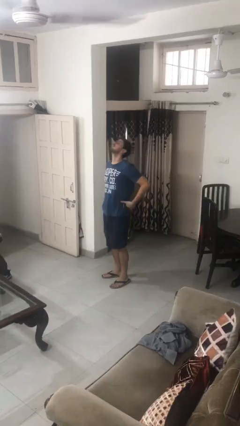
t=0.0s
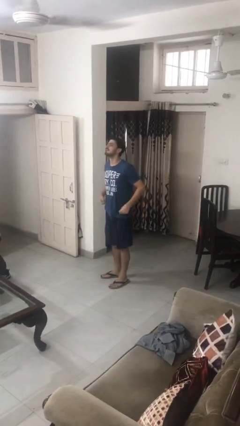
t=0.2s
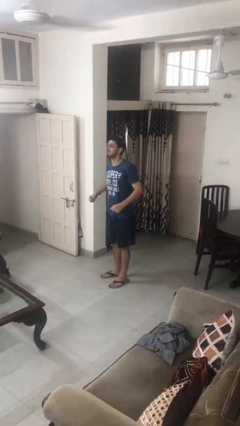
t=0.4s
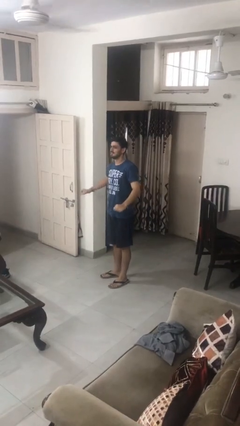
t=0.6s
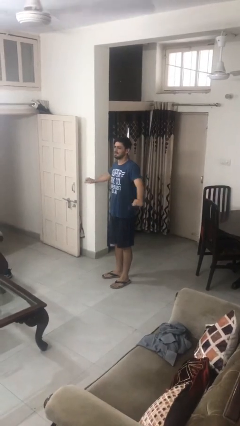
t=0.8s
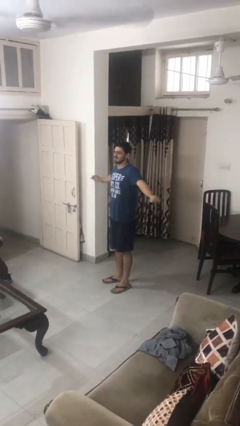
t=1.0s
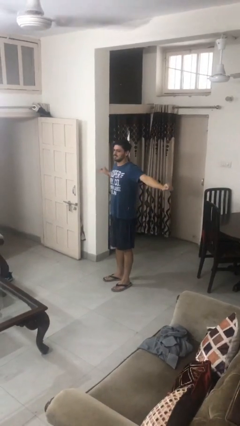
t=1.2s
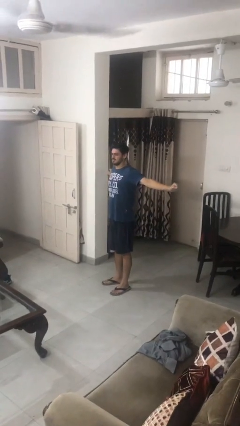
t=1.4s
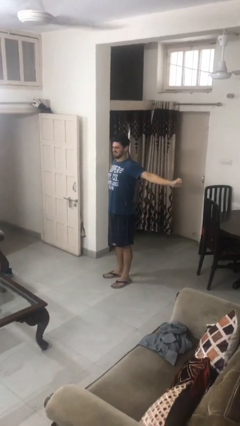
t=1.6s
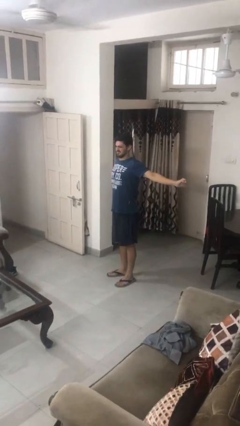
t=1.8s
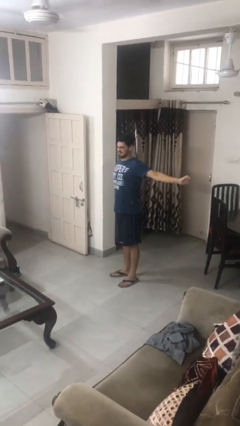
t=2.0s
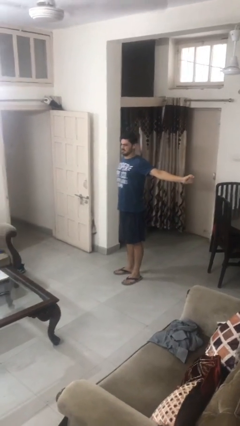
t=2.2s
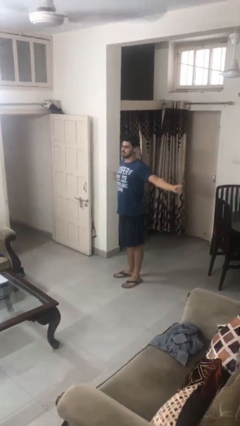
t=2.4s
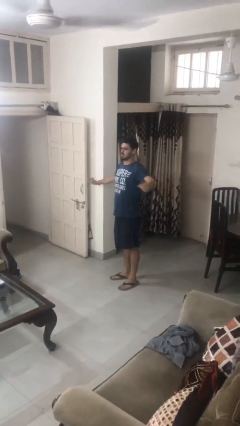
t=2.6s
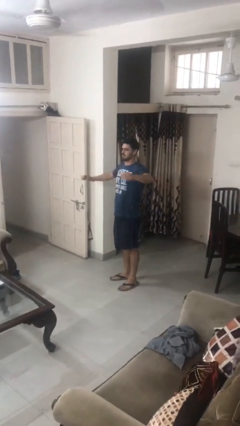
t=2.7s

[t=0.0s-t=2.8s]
person stretches arms to side

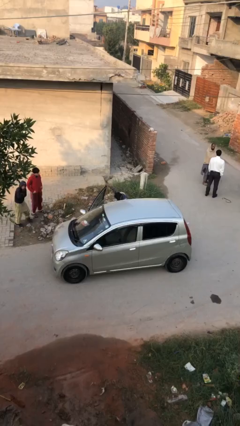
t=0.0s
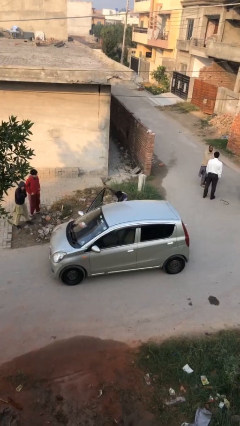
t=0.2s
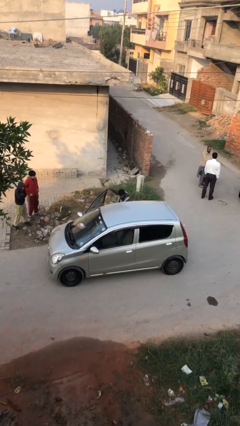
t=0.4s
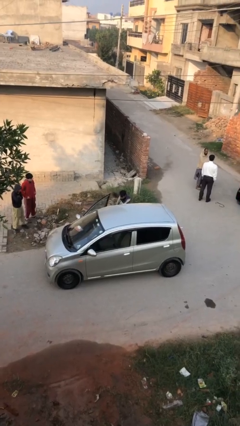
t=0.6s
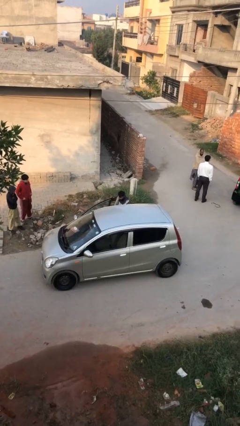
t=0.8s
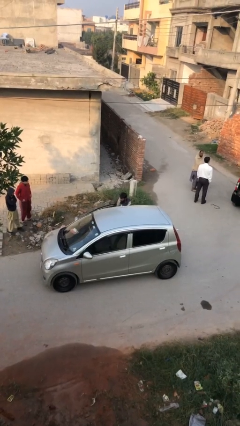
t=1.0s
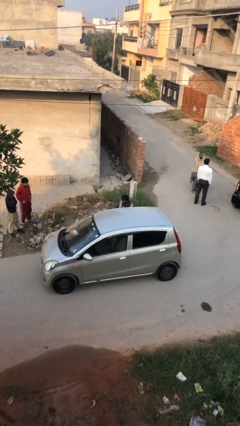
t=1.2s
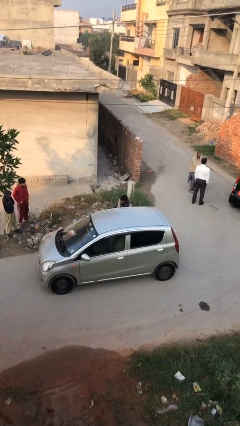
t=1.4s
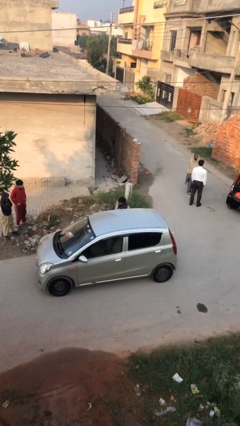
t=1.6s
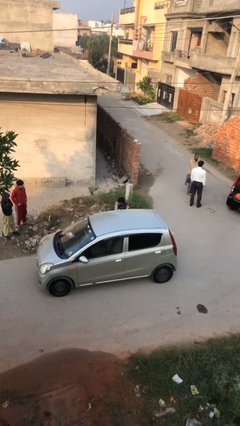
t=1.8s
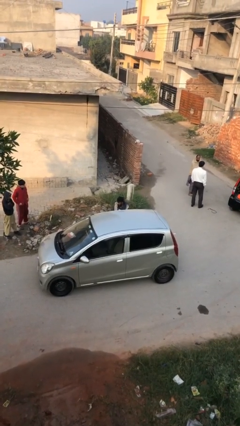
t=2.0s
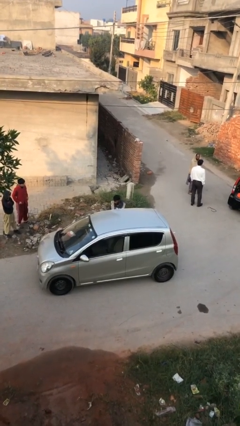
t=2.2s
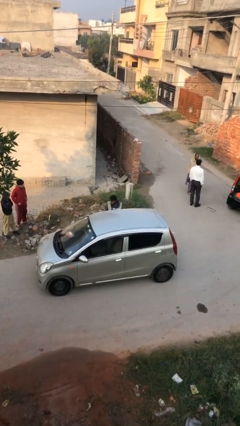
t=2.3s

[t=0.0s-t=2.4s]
person closes car door

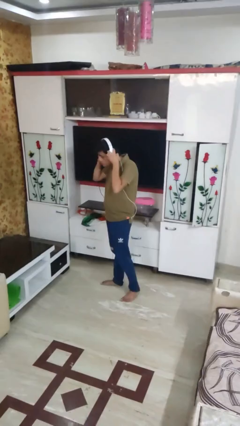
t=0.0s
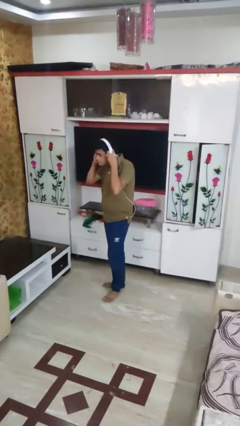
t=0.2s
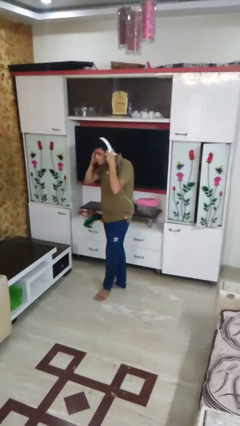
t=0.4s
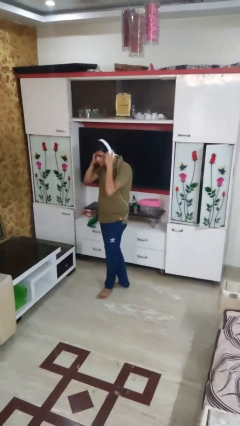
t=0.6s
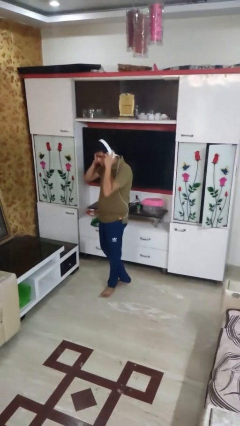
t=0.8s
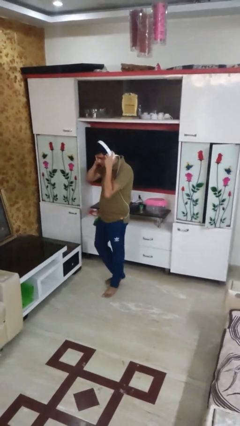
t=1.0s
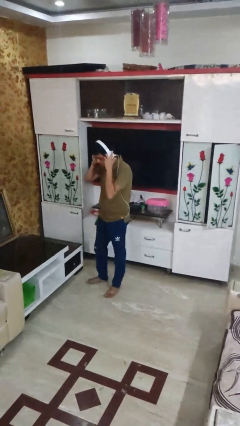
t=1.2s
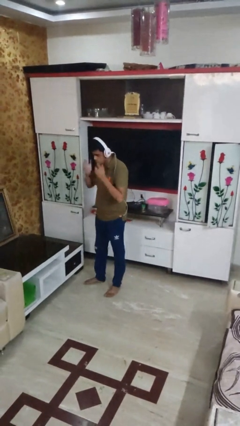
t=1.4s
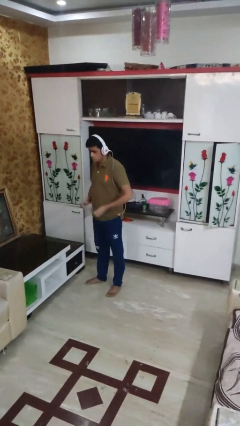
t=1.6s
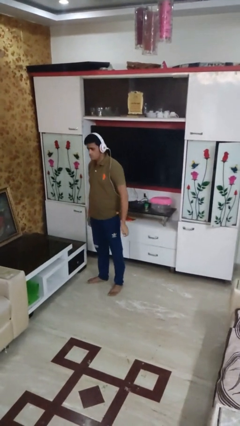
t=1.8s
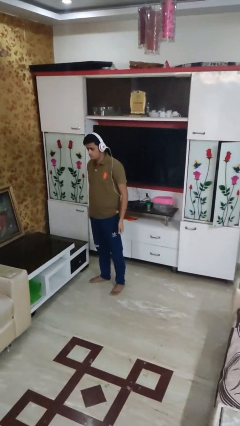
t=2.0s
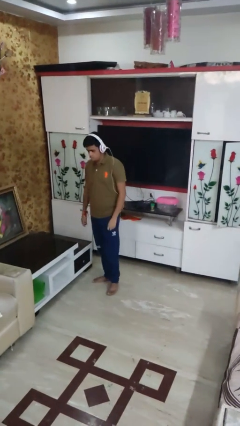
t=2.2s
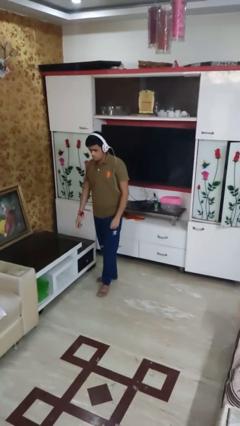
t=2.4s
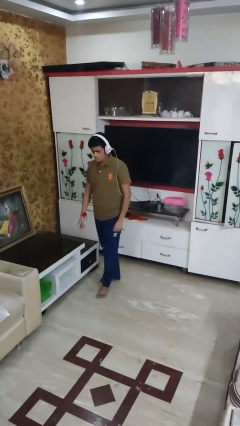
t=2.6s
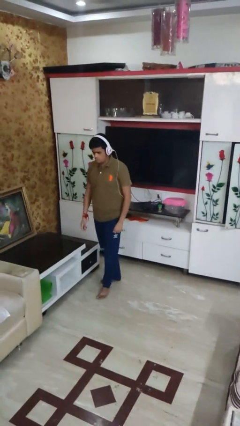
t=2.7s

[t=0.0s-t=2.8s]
person puts on headphones

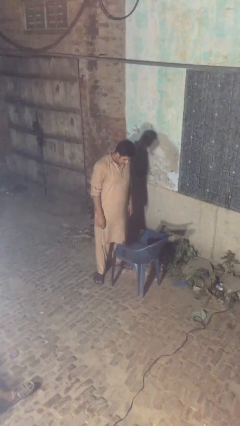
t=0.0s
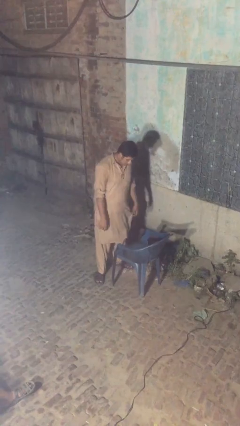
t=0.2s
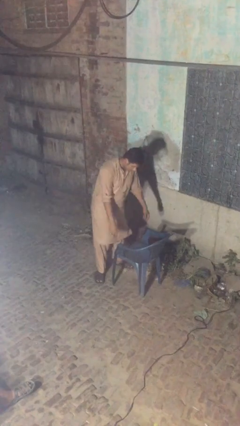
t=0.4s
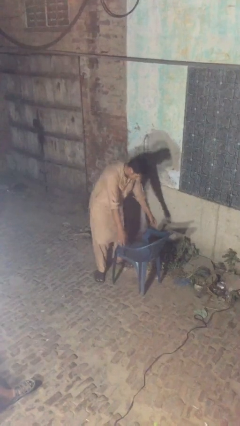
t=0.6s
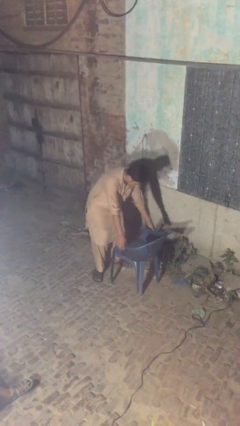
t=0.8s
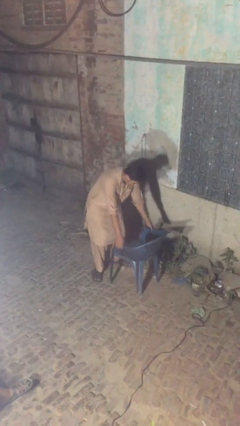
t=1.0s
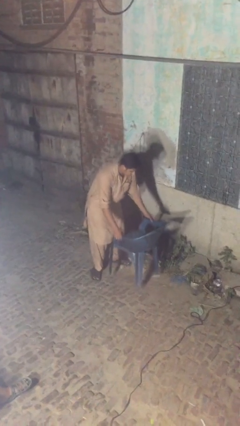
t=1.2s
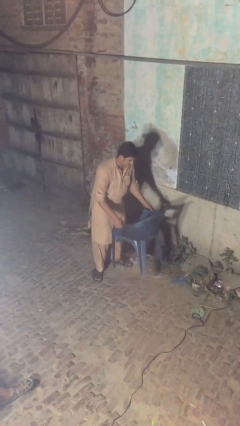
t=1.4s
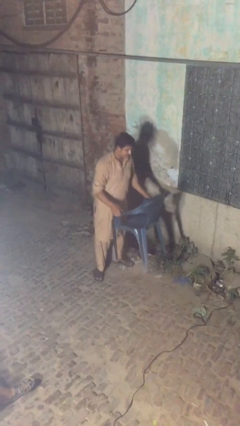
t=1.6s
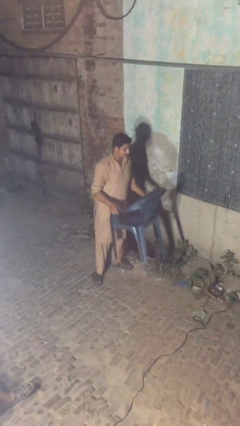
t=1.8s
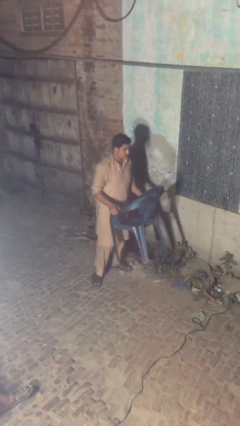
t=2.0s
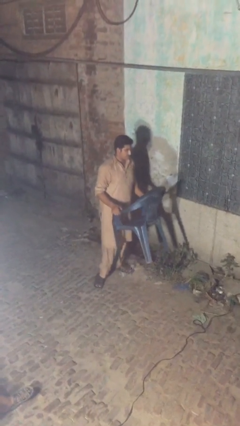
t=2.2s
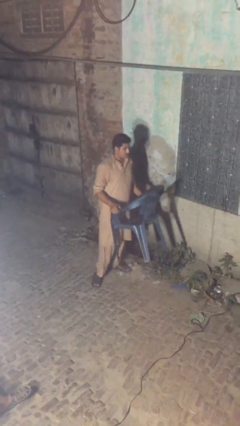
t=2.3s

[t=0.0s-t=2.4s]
person picks up object from floor

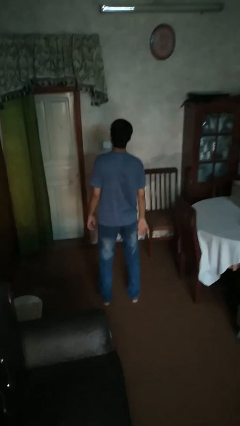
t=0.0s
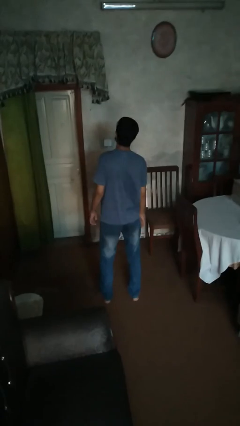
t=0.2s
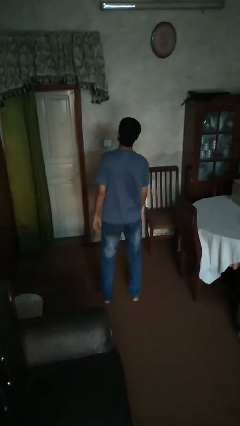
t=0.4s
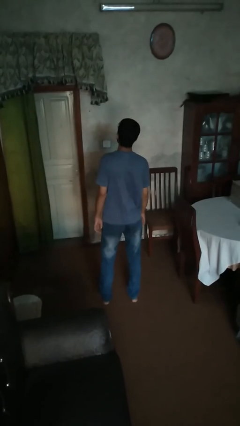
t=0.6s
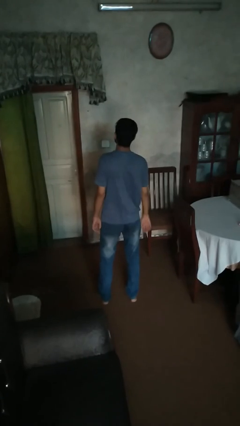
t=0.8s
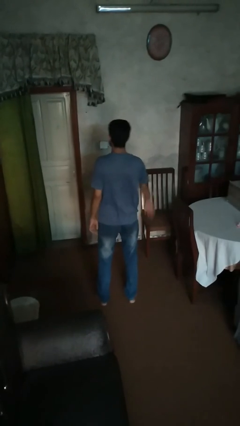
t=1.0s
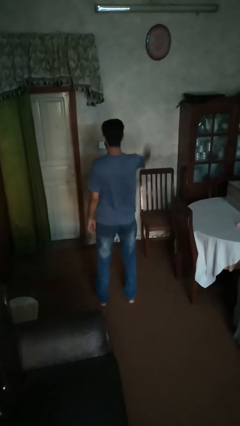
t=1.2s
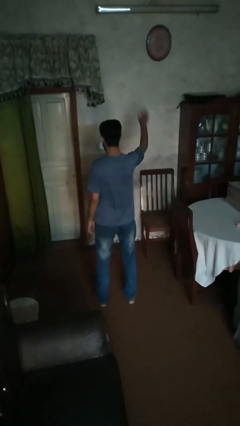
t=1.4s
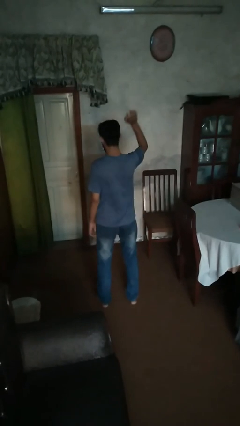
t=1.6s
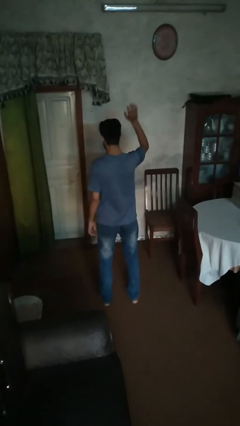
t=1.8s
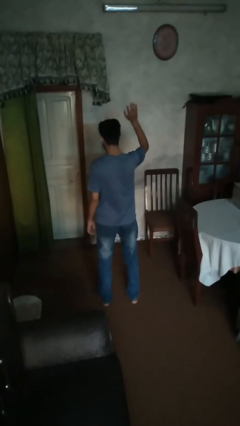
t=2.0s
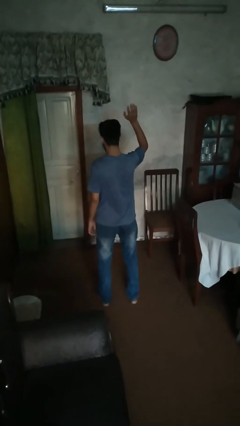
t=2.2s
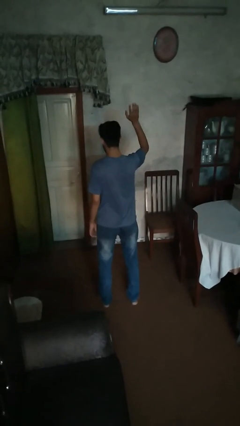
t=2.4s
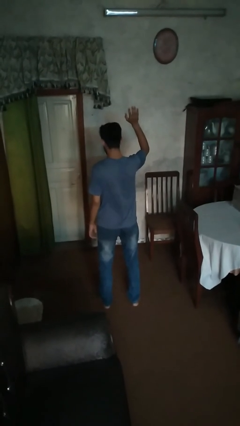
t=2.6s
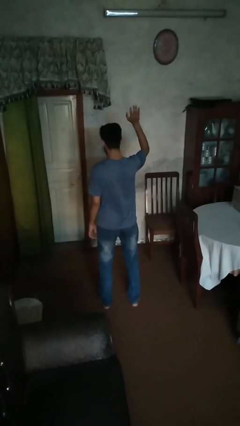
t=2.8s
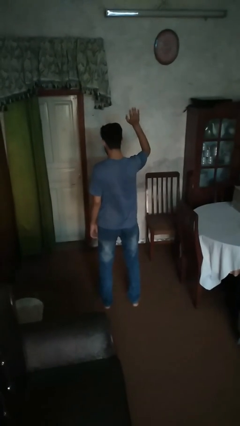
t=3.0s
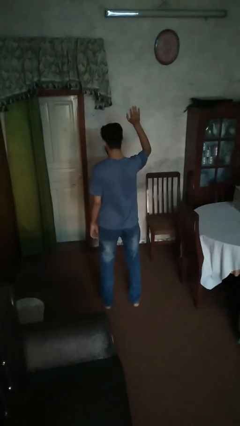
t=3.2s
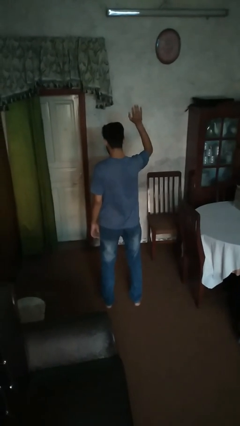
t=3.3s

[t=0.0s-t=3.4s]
person gestures raise hand

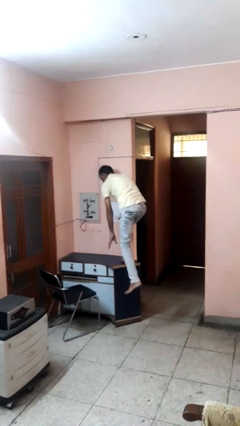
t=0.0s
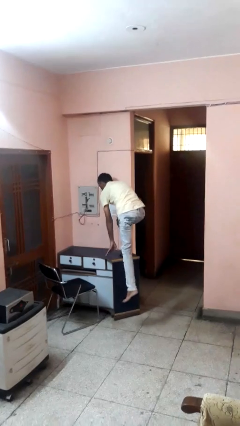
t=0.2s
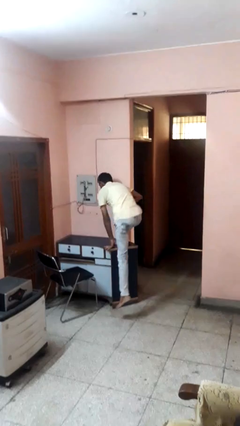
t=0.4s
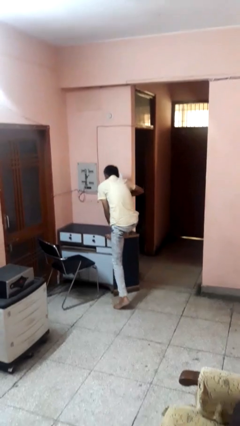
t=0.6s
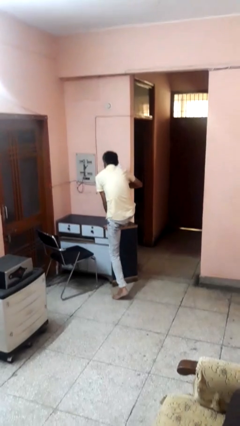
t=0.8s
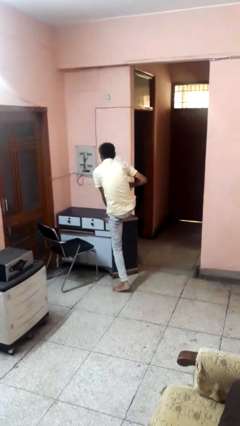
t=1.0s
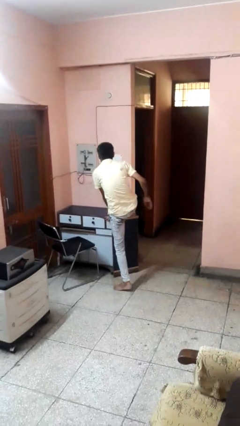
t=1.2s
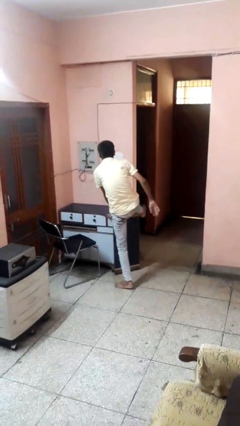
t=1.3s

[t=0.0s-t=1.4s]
person climbs off table

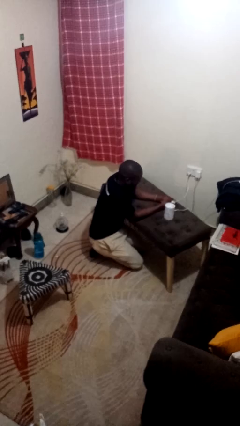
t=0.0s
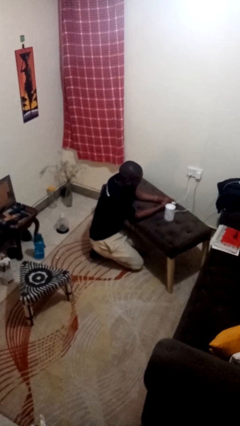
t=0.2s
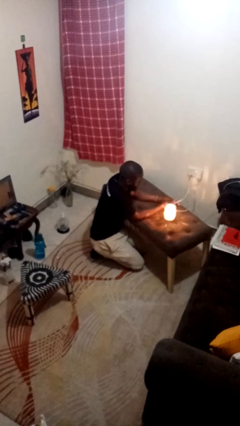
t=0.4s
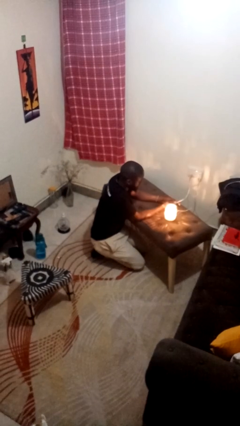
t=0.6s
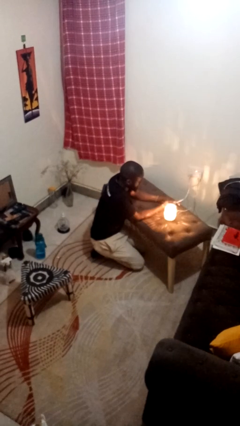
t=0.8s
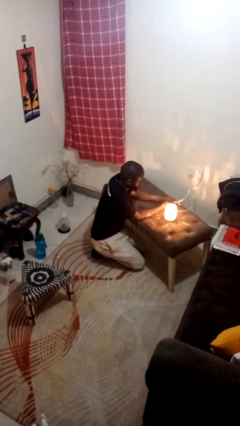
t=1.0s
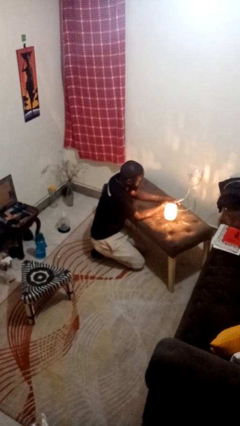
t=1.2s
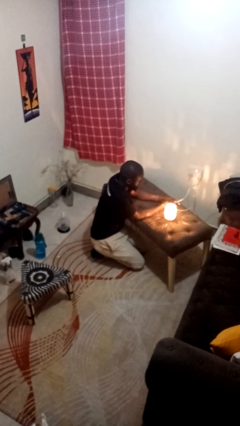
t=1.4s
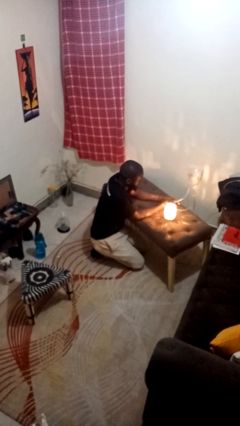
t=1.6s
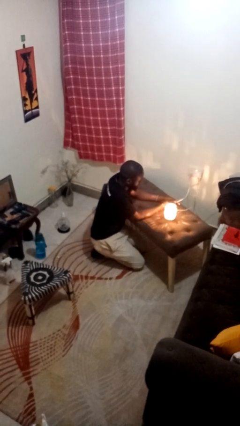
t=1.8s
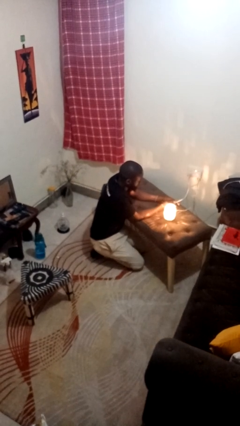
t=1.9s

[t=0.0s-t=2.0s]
person turns on lamp

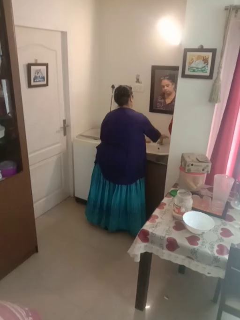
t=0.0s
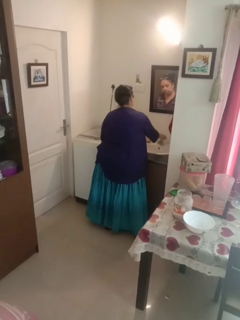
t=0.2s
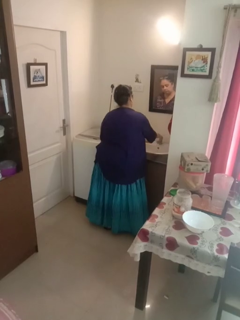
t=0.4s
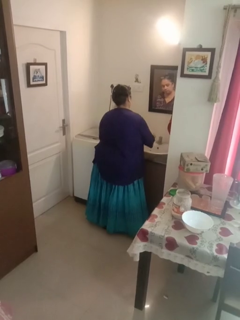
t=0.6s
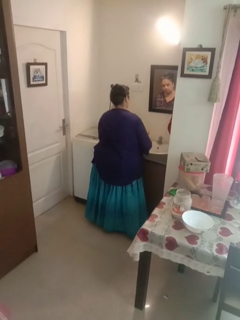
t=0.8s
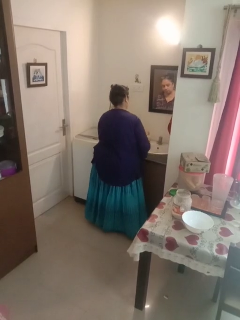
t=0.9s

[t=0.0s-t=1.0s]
person turns off faucet
